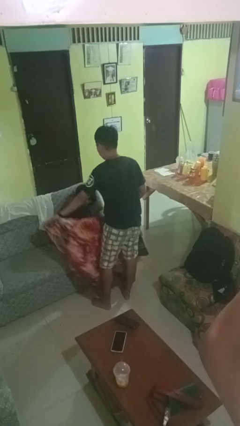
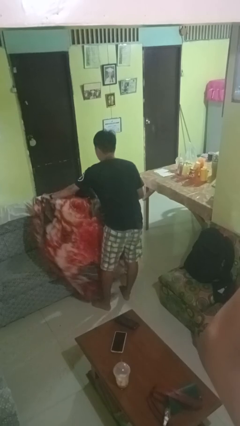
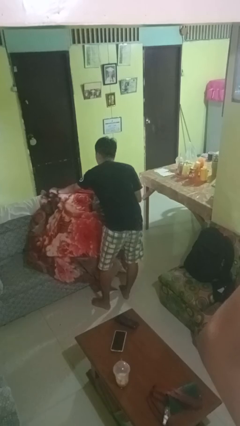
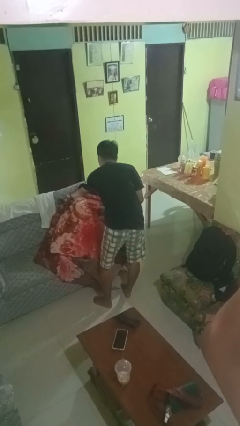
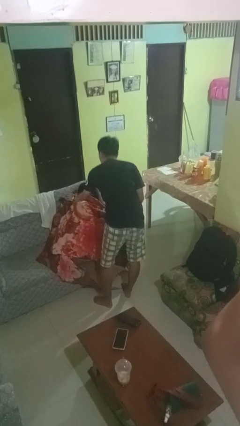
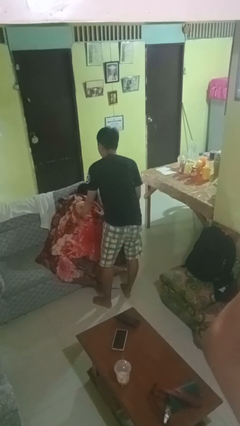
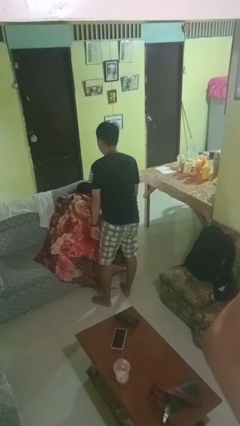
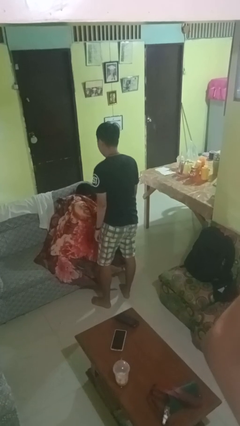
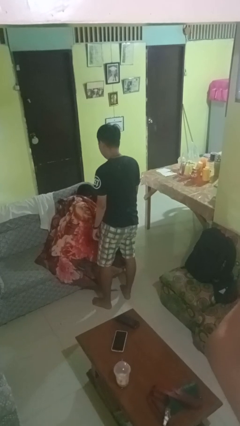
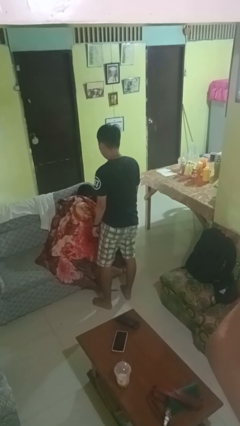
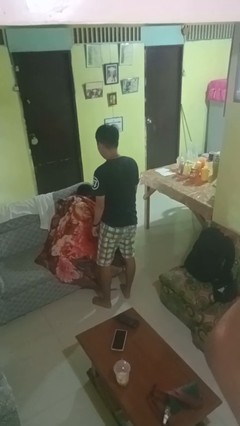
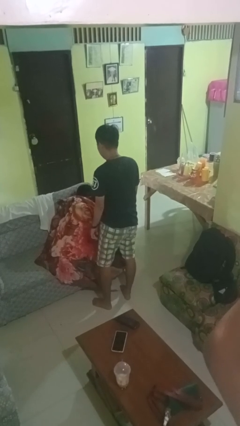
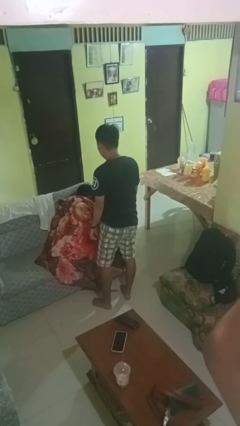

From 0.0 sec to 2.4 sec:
person covers friend with blanket

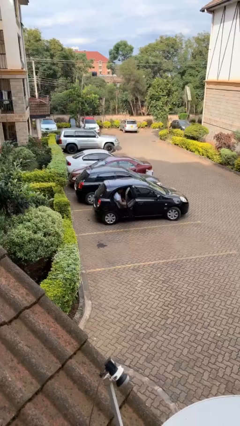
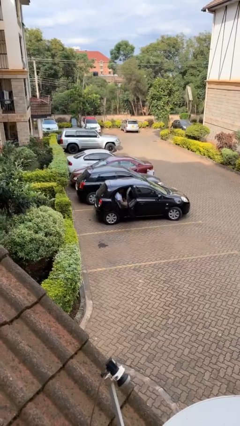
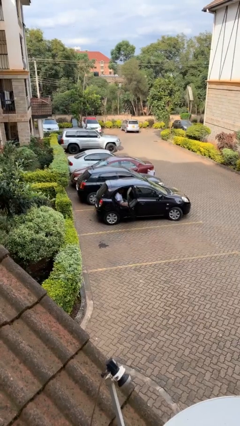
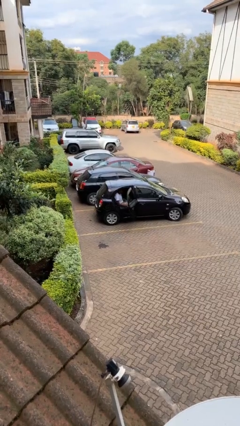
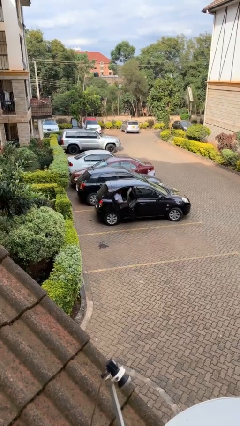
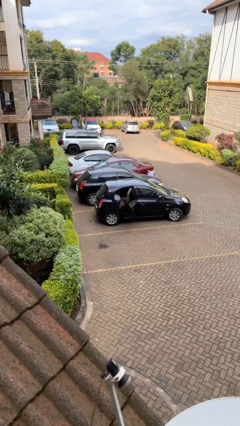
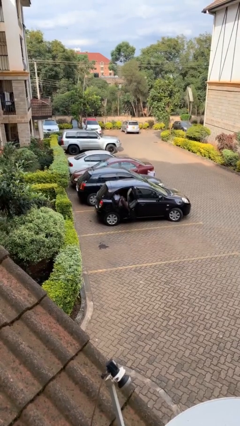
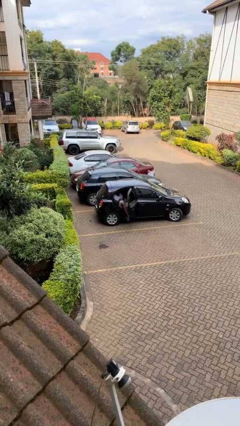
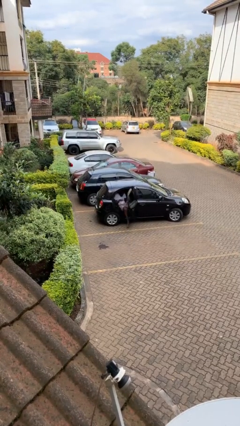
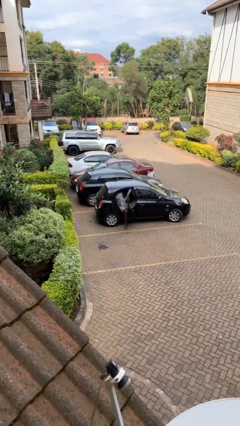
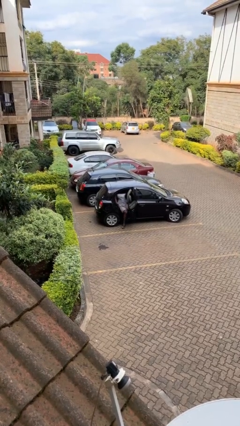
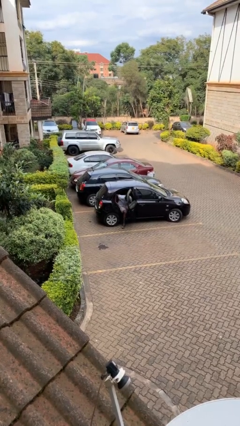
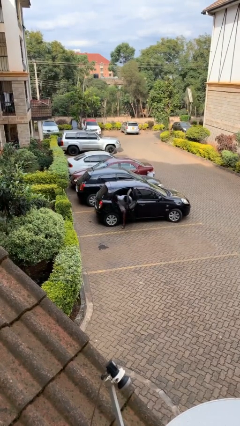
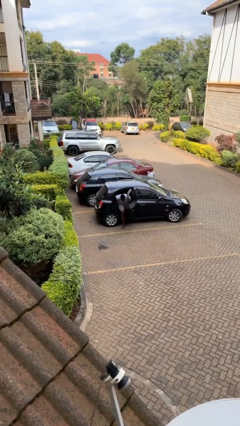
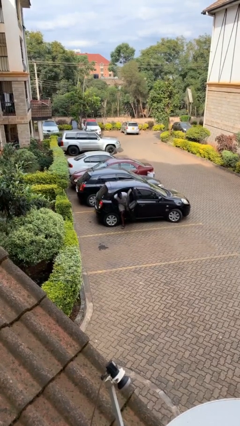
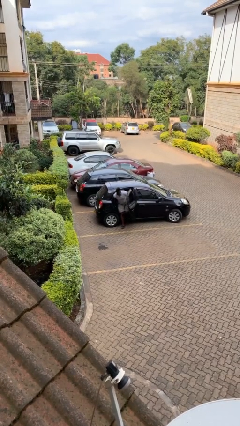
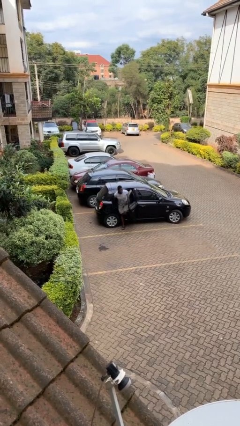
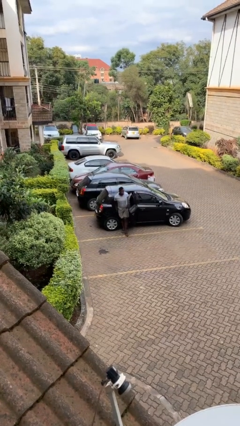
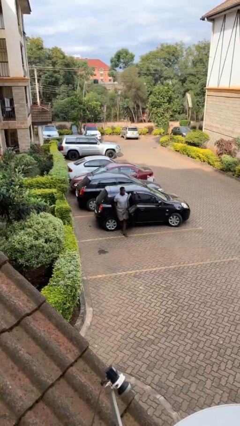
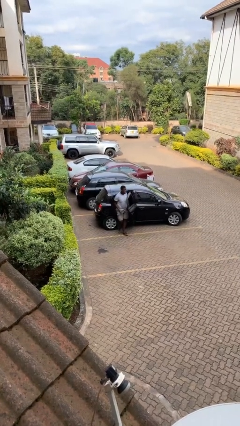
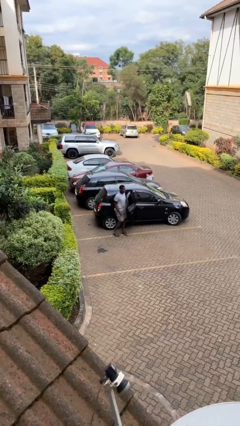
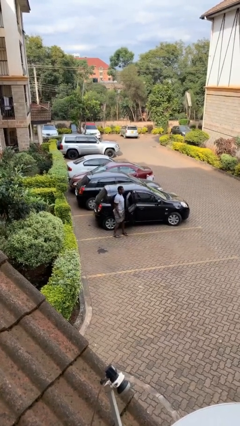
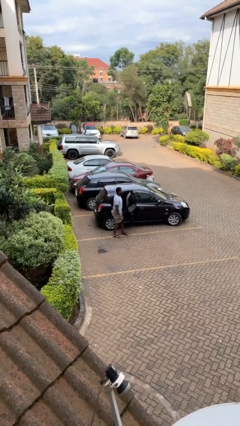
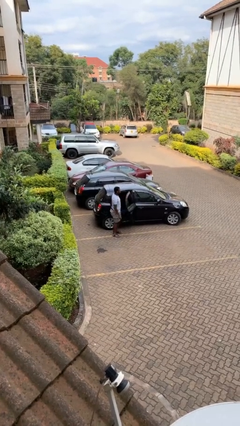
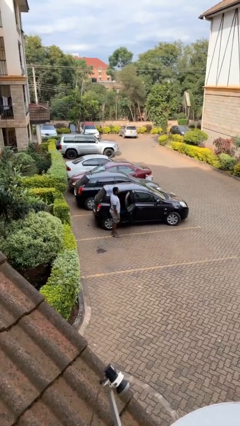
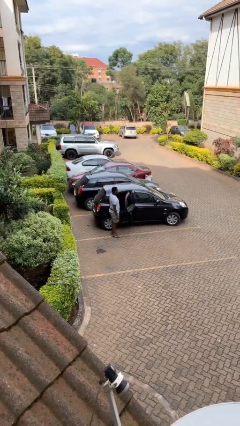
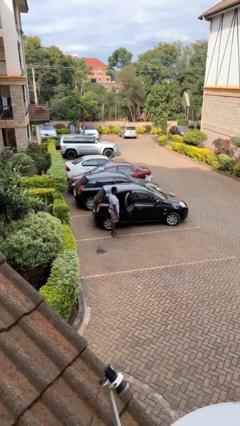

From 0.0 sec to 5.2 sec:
person exits car

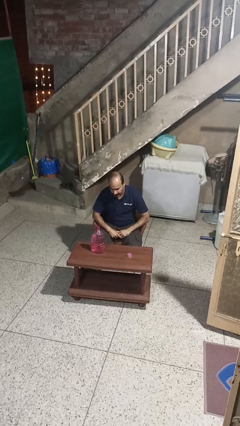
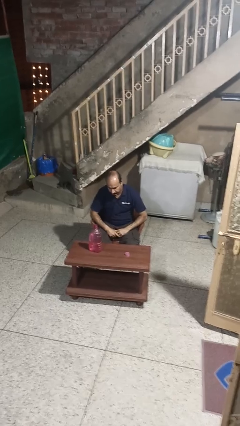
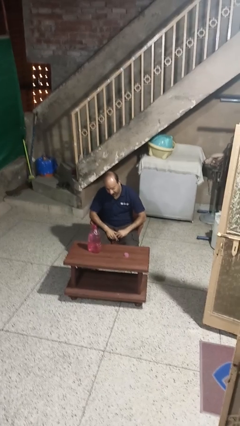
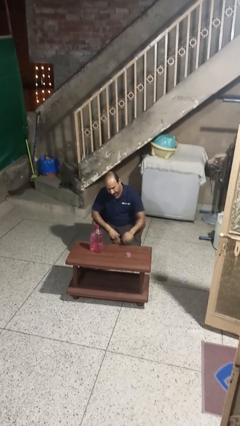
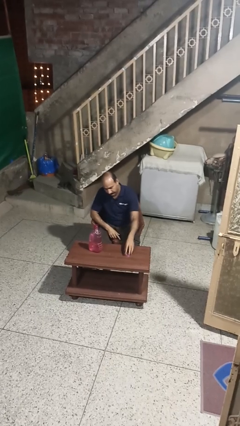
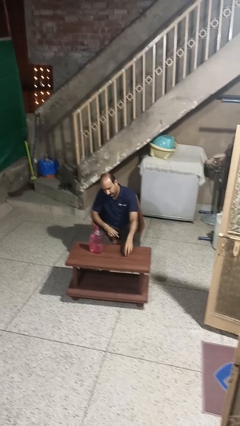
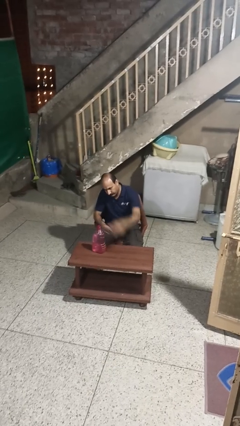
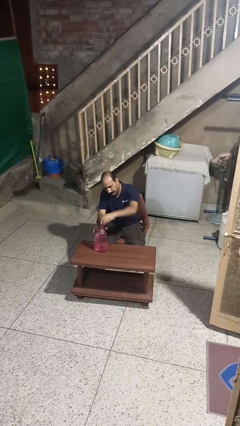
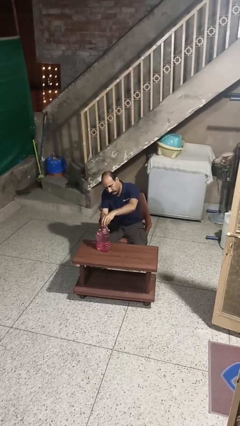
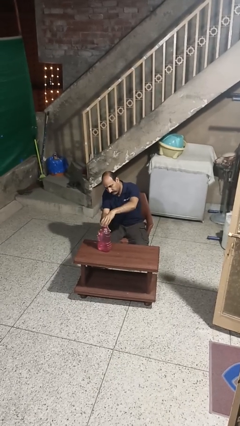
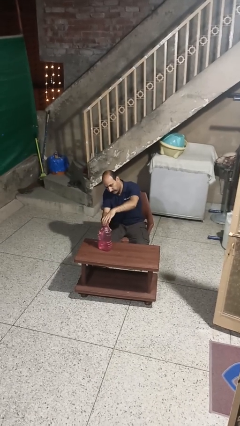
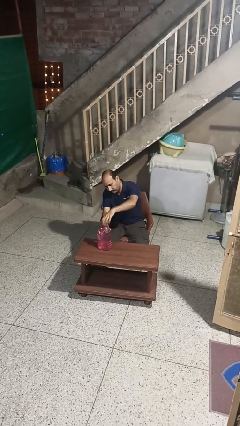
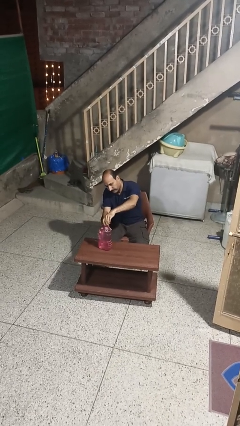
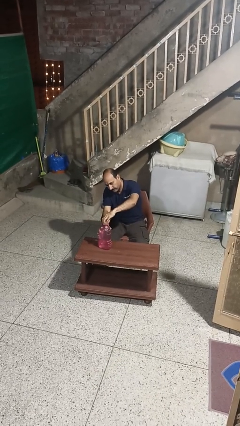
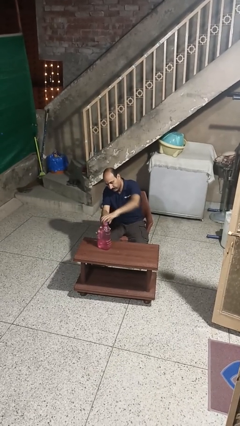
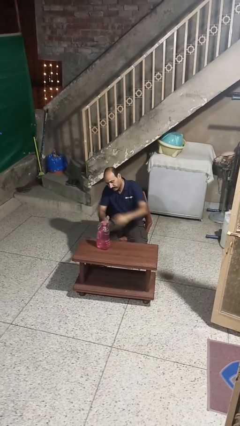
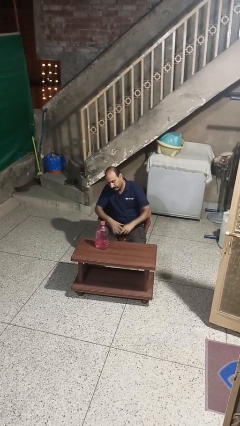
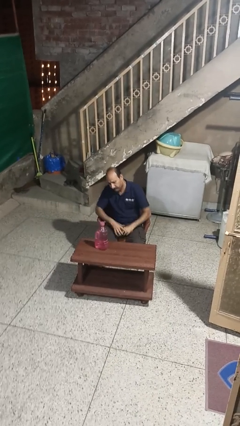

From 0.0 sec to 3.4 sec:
person screws lid to bottle

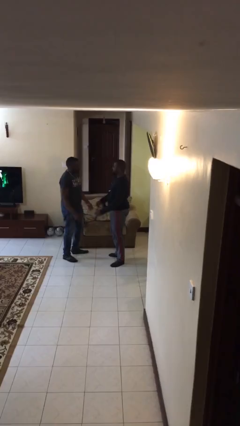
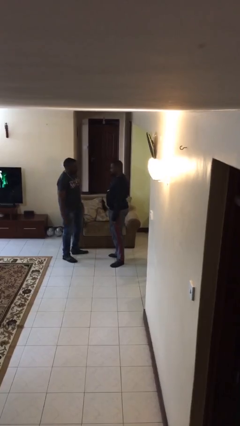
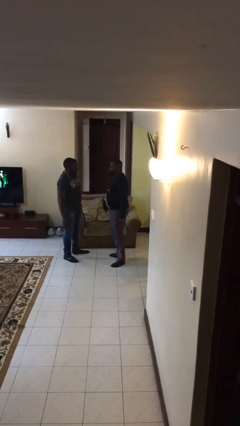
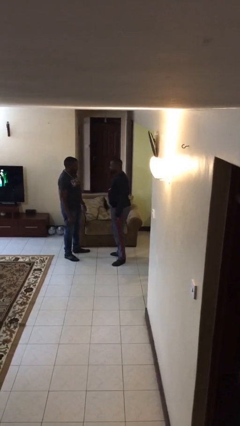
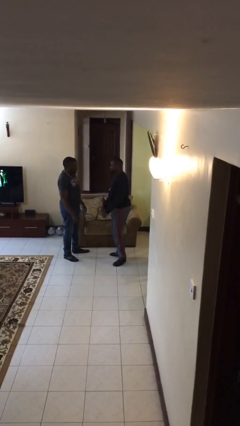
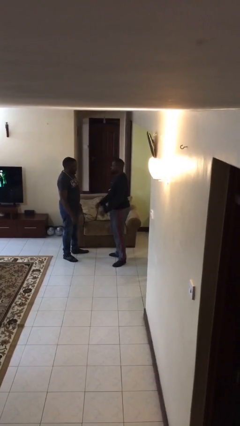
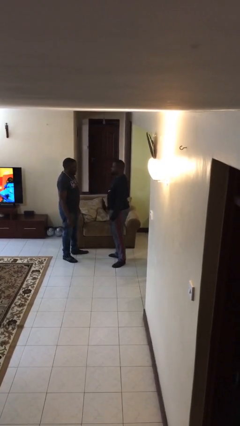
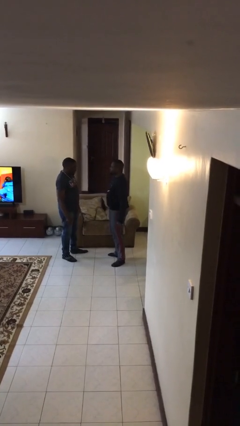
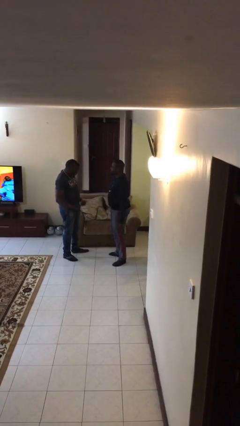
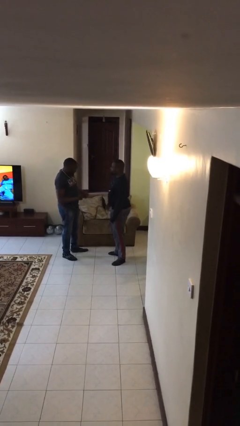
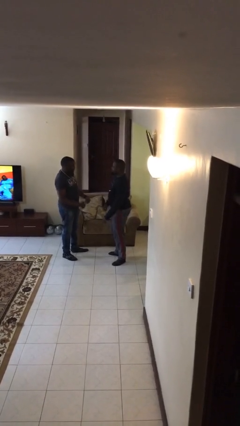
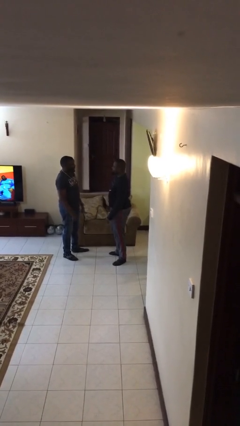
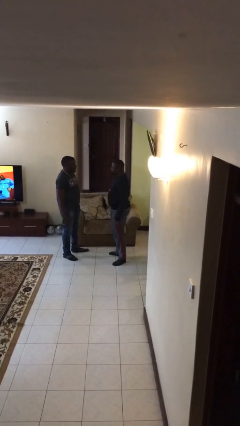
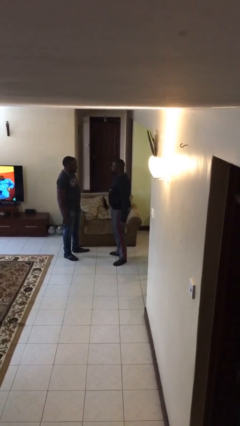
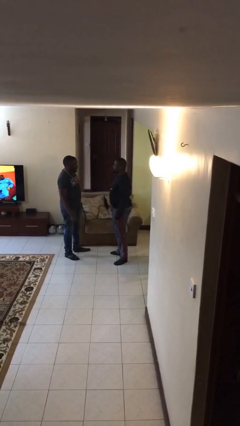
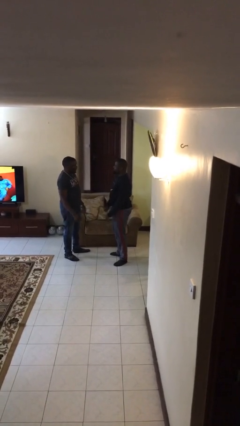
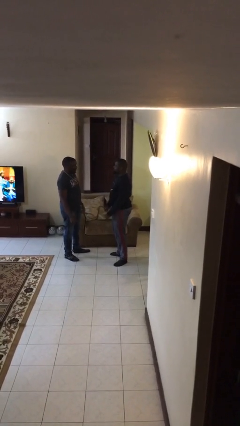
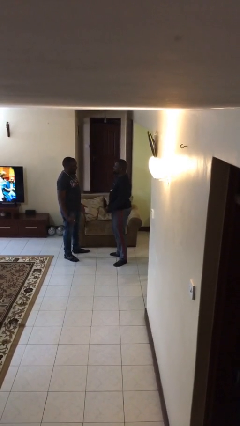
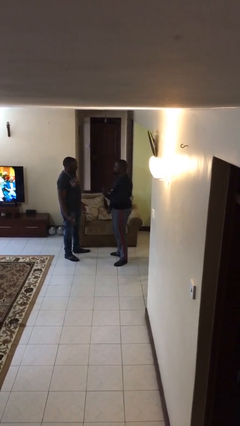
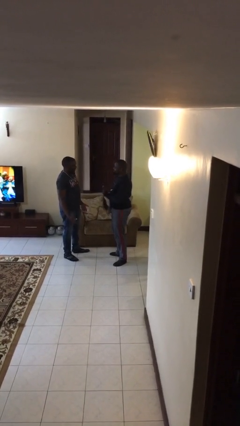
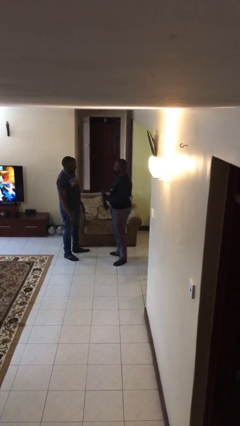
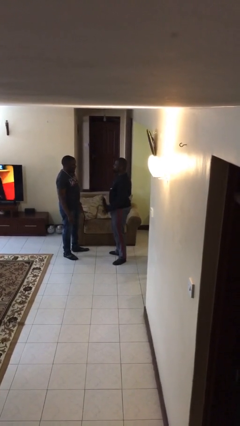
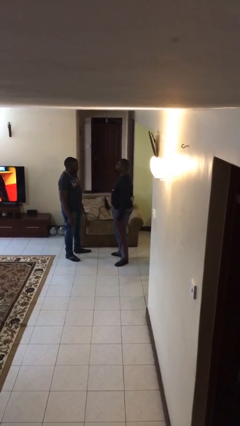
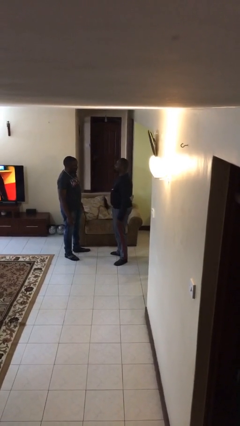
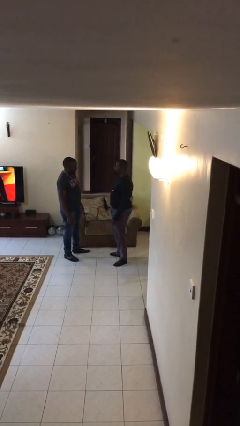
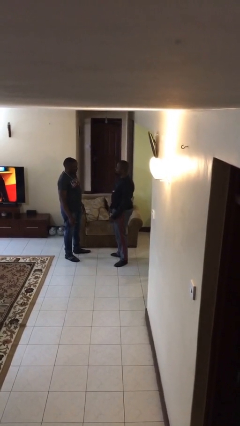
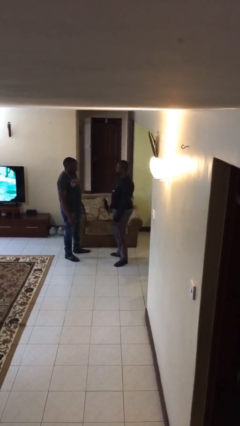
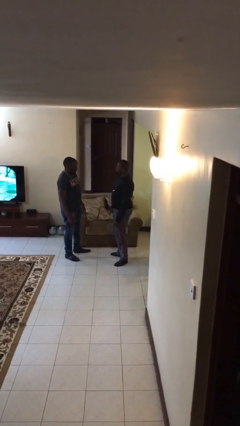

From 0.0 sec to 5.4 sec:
person talks to person

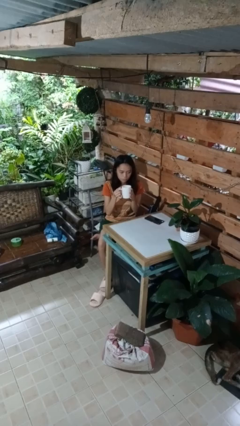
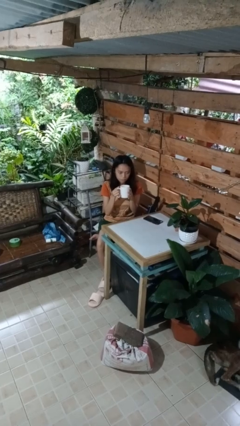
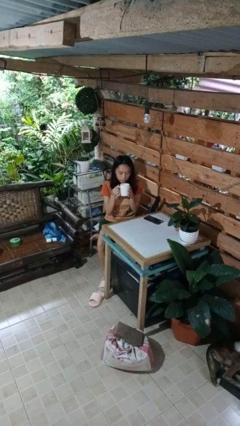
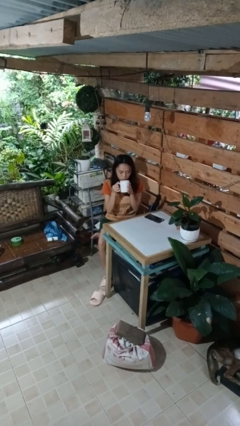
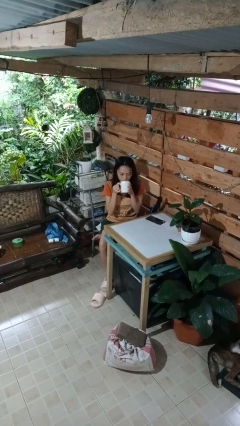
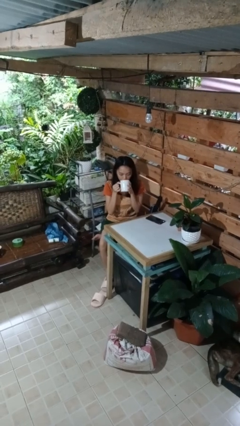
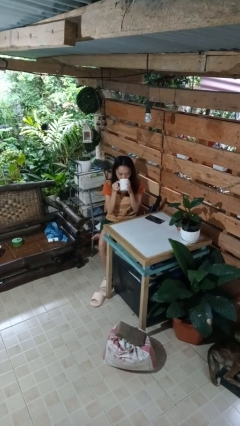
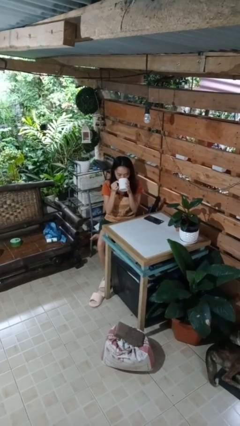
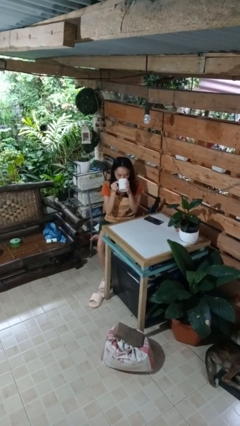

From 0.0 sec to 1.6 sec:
person drinks from mug
